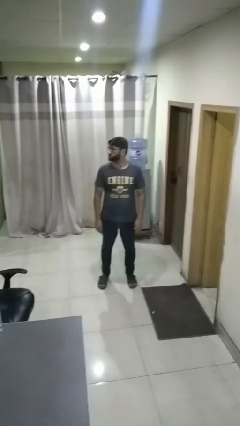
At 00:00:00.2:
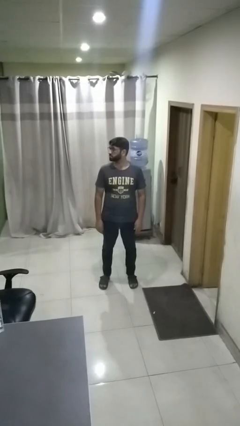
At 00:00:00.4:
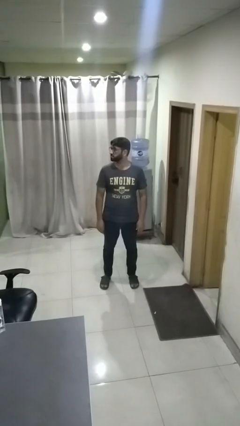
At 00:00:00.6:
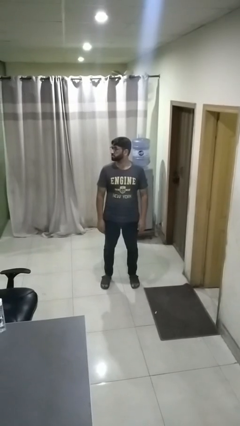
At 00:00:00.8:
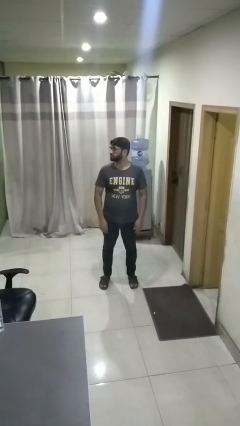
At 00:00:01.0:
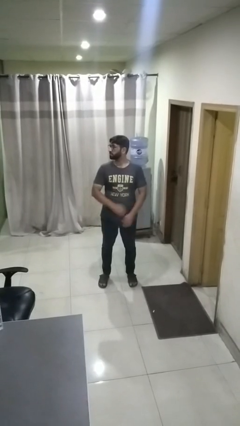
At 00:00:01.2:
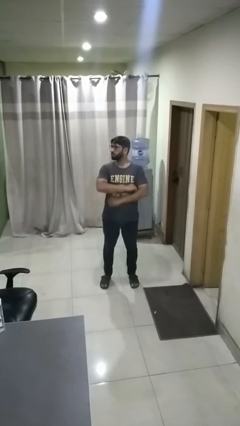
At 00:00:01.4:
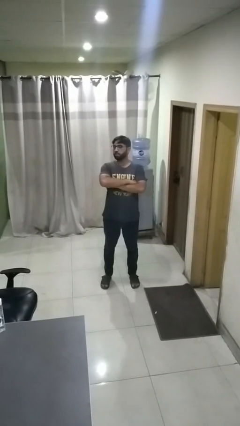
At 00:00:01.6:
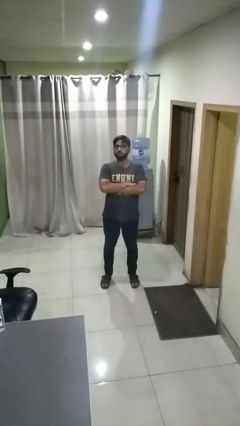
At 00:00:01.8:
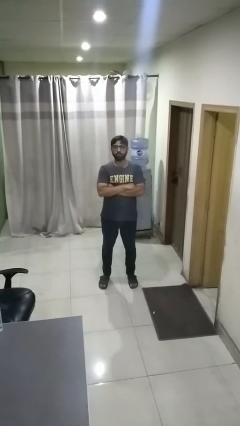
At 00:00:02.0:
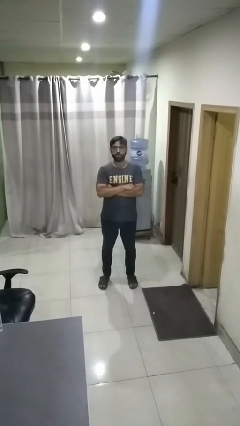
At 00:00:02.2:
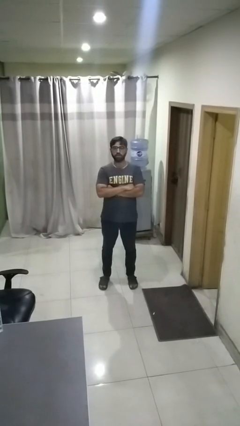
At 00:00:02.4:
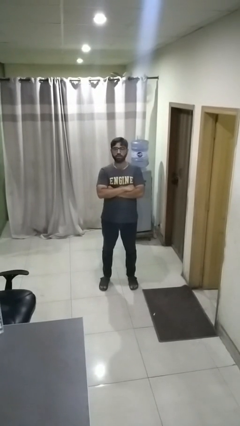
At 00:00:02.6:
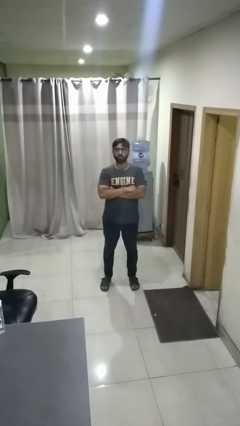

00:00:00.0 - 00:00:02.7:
person crosses arms

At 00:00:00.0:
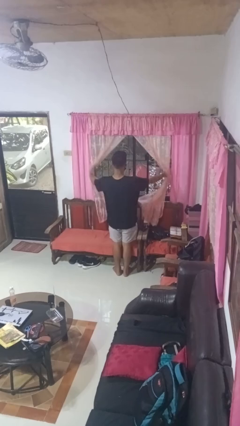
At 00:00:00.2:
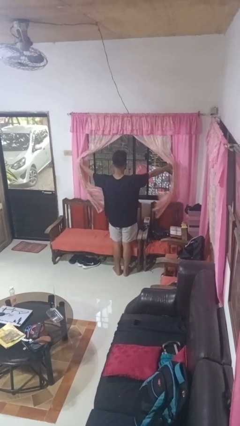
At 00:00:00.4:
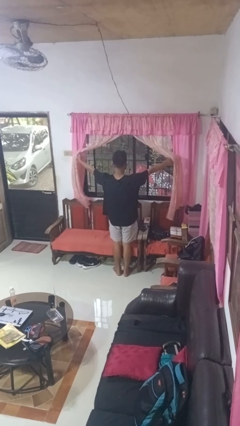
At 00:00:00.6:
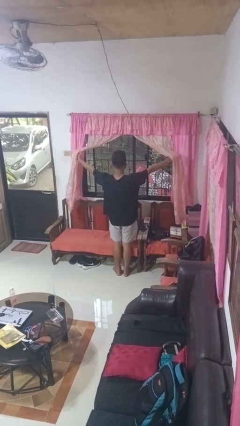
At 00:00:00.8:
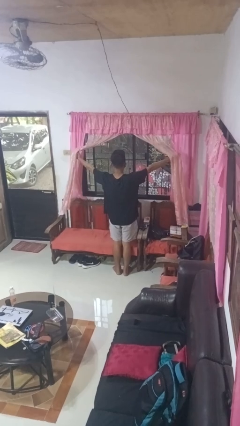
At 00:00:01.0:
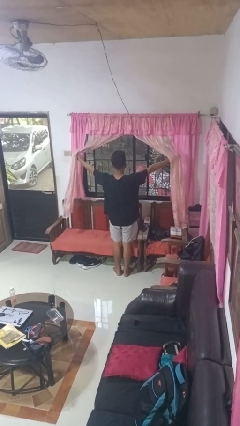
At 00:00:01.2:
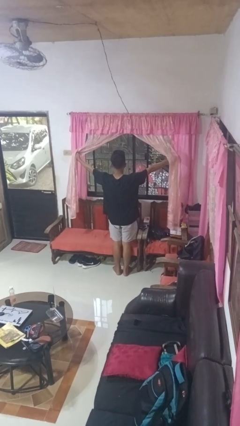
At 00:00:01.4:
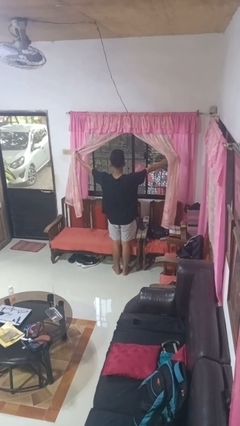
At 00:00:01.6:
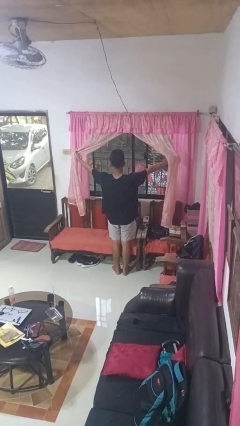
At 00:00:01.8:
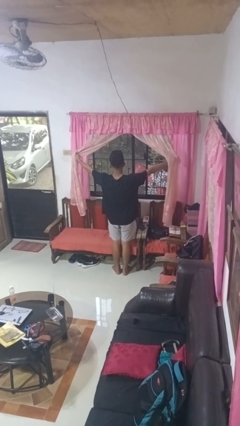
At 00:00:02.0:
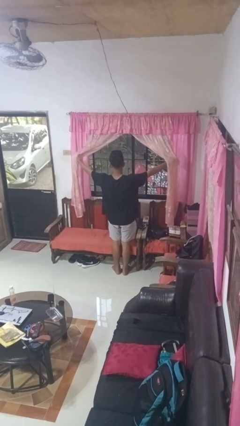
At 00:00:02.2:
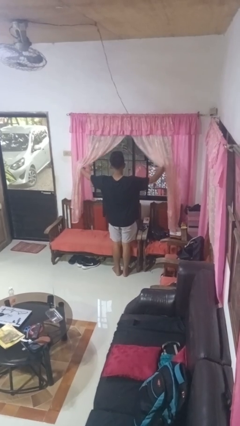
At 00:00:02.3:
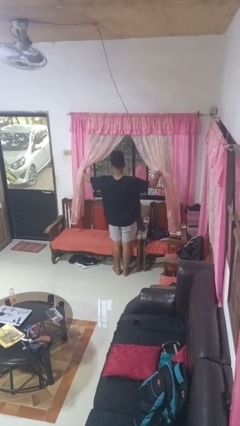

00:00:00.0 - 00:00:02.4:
person opens curtains

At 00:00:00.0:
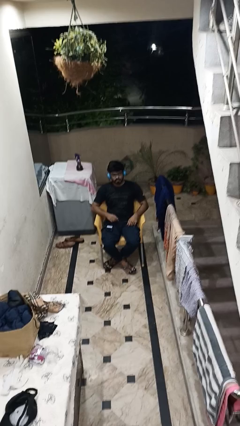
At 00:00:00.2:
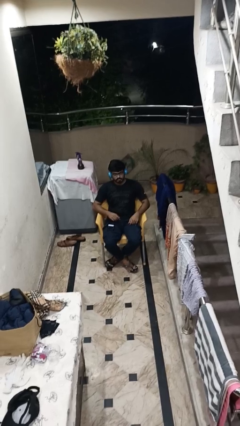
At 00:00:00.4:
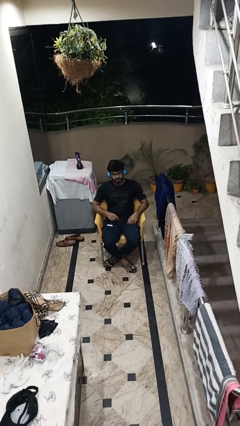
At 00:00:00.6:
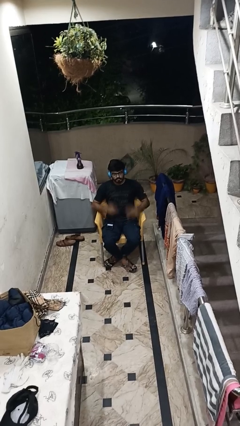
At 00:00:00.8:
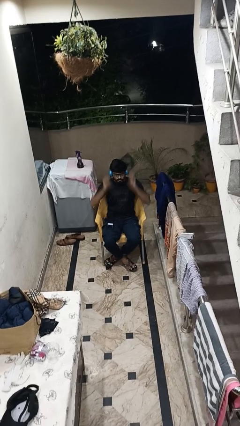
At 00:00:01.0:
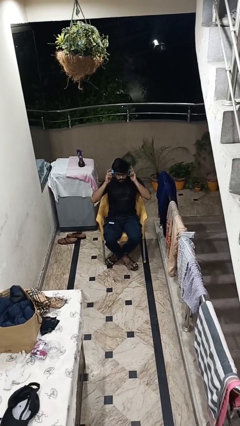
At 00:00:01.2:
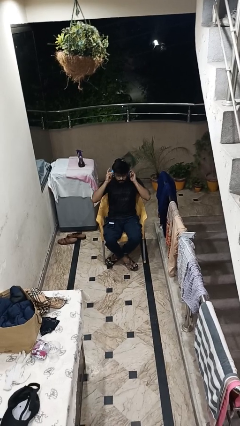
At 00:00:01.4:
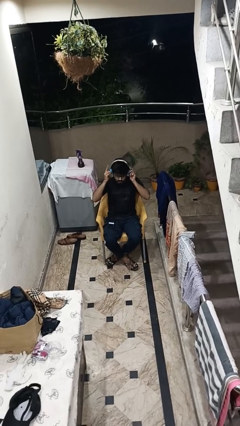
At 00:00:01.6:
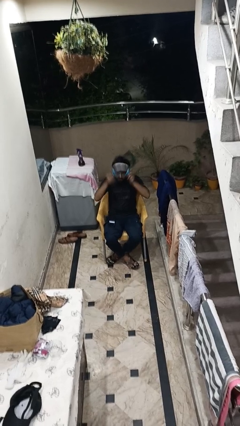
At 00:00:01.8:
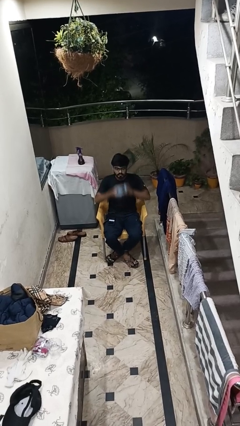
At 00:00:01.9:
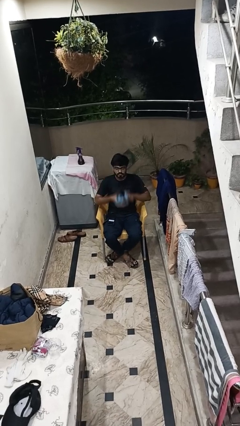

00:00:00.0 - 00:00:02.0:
person takes off headphones

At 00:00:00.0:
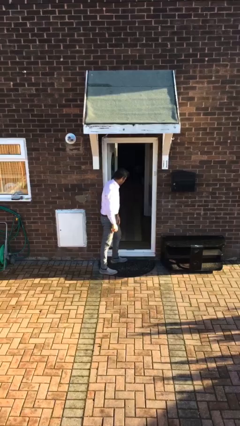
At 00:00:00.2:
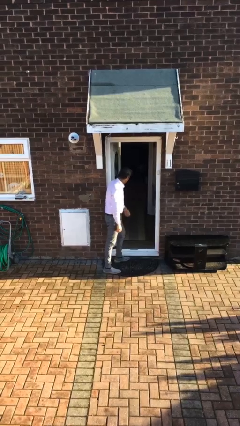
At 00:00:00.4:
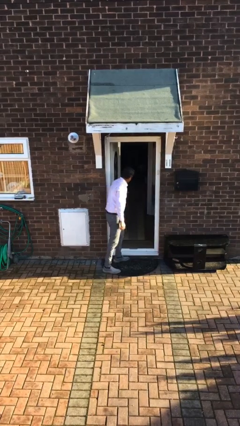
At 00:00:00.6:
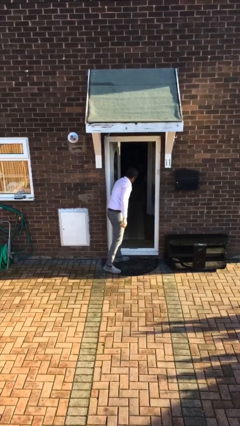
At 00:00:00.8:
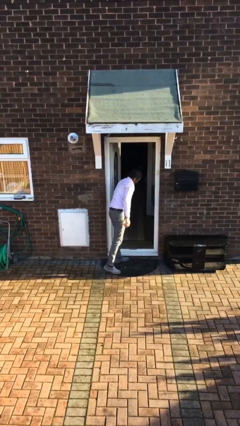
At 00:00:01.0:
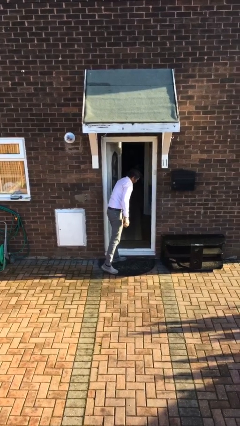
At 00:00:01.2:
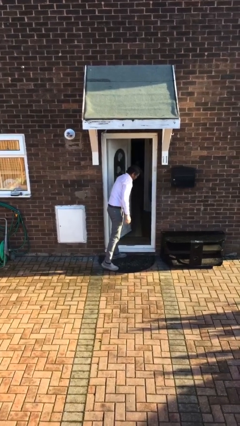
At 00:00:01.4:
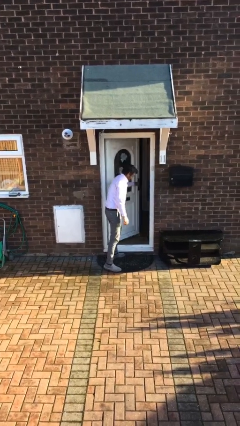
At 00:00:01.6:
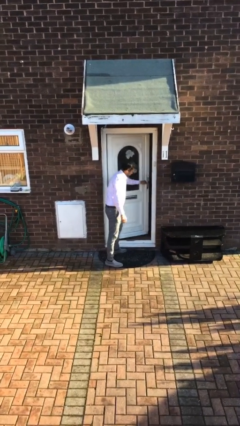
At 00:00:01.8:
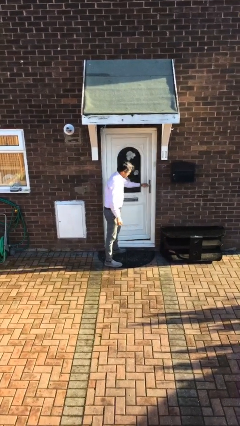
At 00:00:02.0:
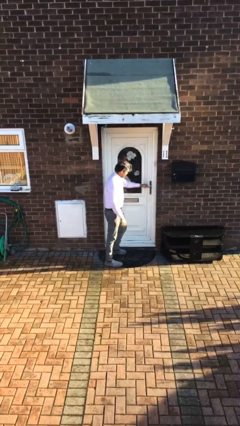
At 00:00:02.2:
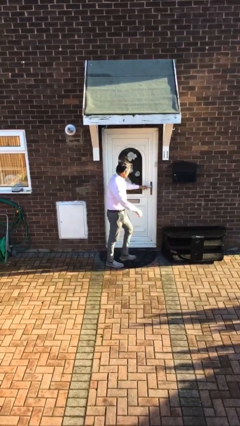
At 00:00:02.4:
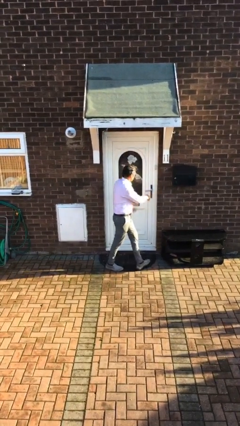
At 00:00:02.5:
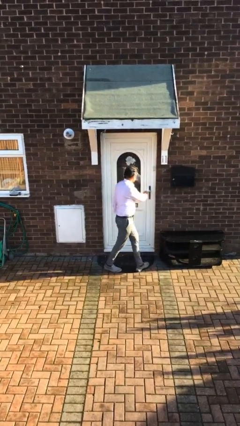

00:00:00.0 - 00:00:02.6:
person closes facility door

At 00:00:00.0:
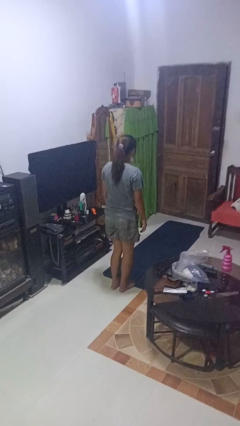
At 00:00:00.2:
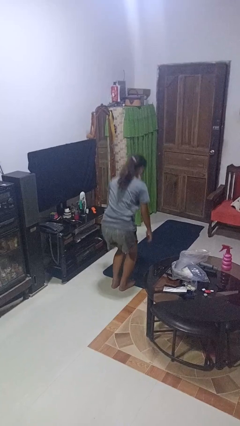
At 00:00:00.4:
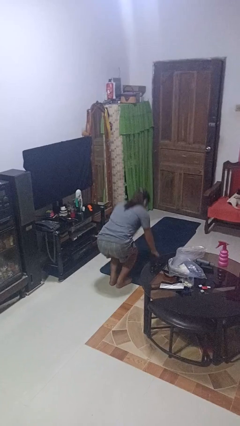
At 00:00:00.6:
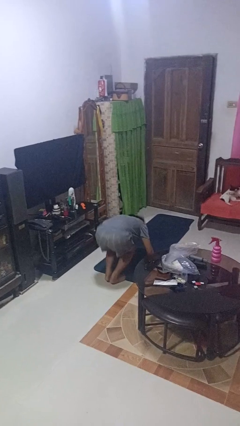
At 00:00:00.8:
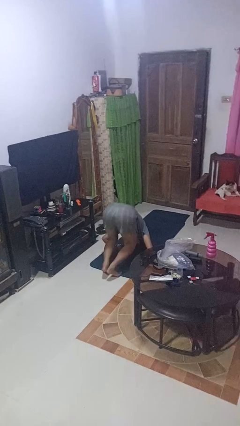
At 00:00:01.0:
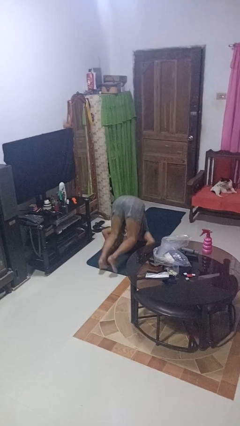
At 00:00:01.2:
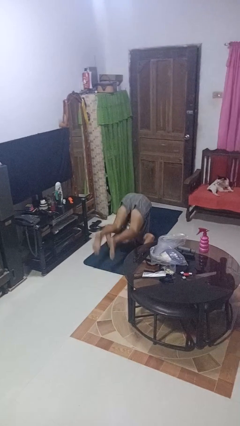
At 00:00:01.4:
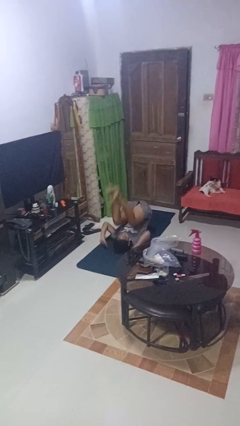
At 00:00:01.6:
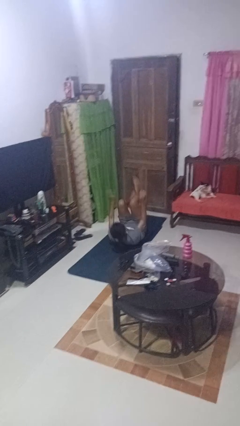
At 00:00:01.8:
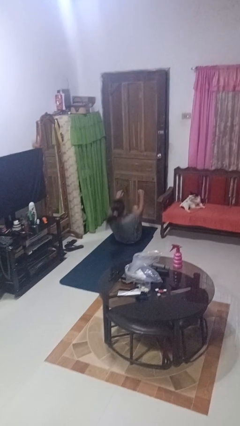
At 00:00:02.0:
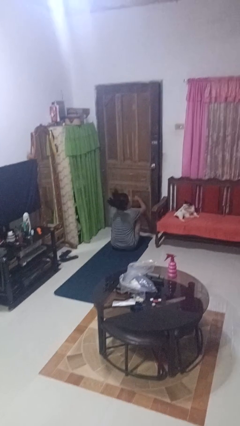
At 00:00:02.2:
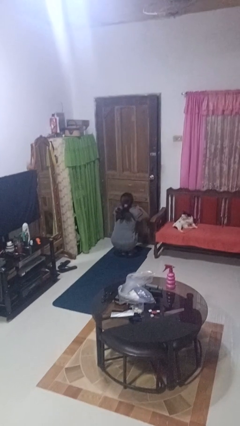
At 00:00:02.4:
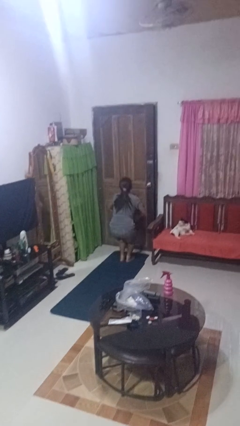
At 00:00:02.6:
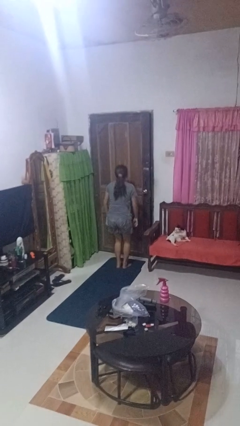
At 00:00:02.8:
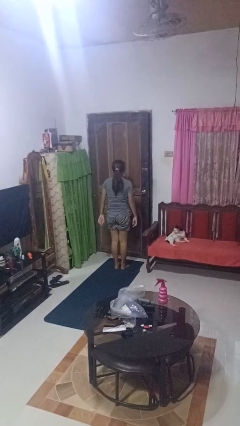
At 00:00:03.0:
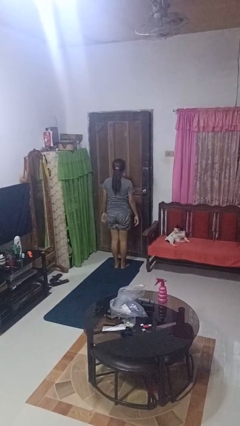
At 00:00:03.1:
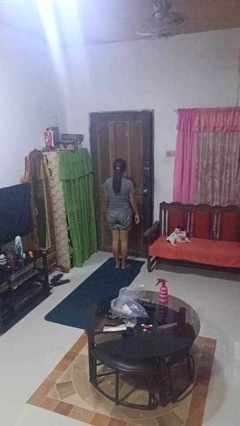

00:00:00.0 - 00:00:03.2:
person somersaults

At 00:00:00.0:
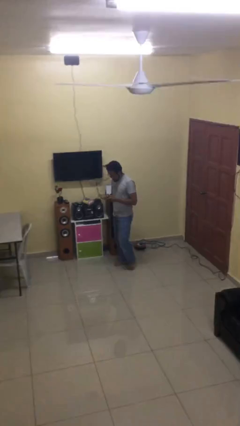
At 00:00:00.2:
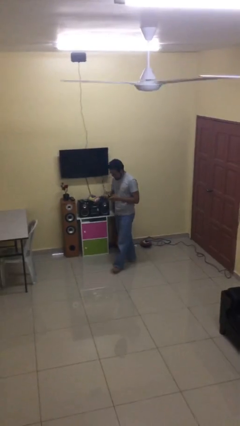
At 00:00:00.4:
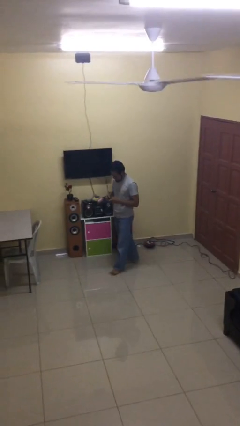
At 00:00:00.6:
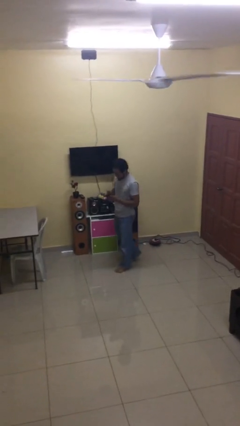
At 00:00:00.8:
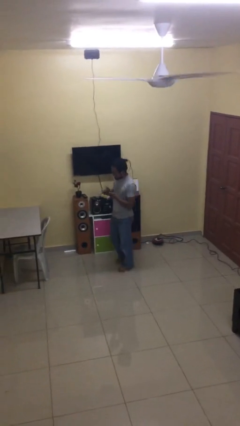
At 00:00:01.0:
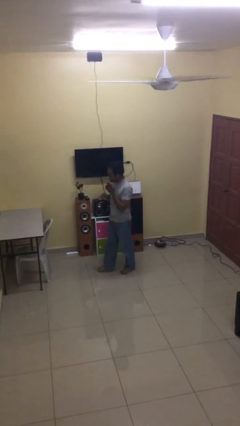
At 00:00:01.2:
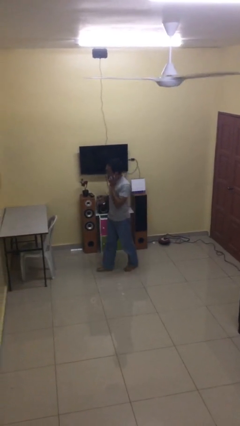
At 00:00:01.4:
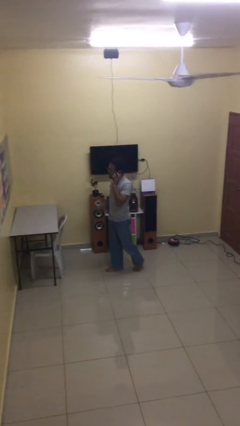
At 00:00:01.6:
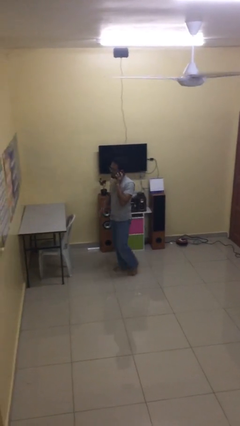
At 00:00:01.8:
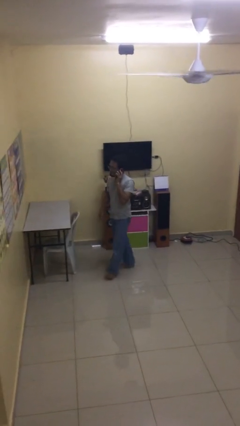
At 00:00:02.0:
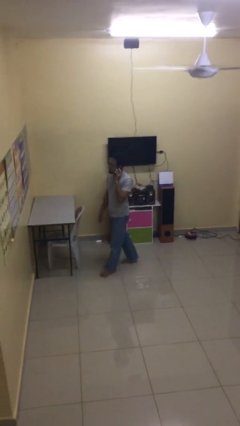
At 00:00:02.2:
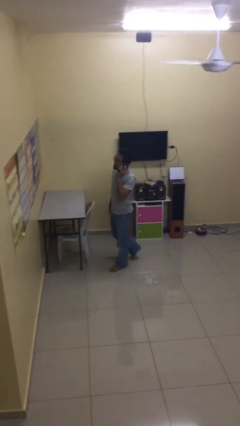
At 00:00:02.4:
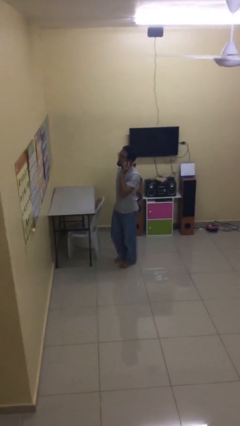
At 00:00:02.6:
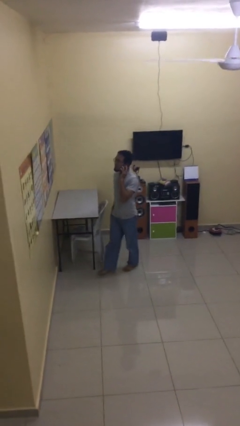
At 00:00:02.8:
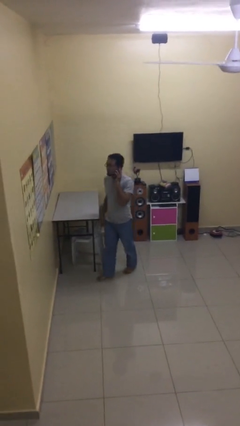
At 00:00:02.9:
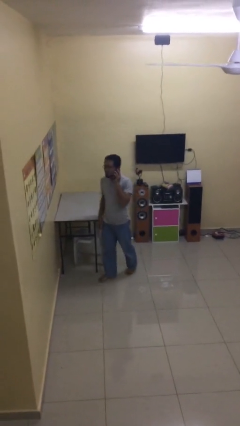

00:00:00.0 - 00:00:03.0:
person talks on phone

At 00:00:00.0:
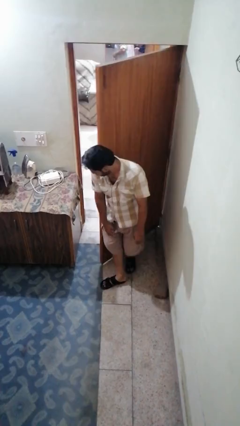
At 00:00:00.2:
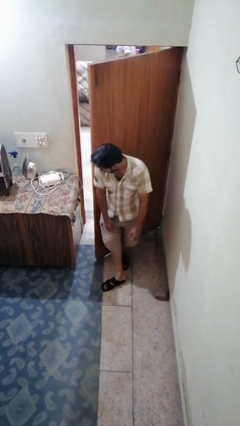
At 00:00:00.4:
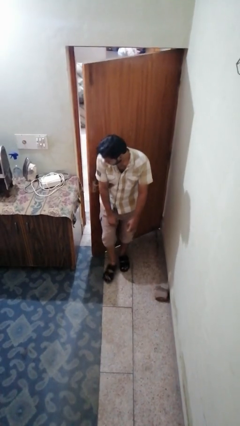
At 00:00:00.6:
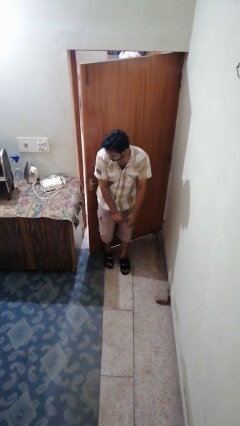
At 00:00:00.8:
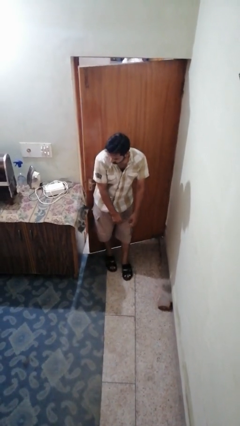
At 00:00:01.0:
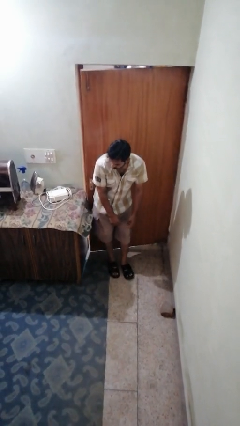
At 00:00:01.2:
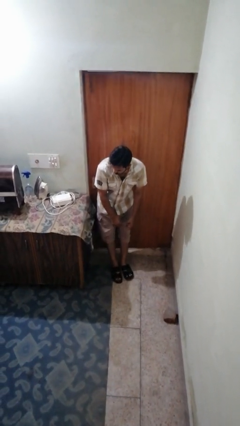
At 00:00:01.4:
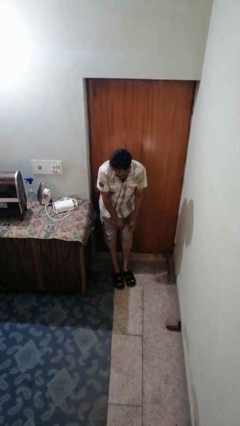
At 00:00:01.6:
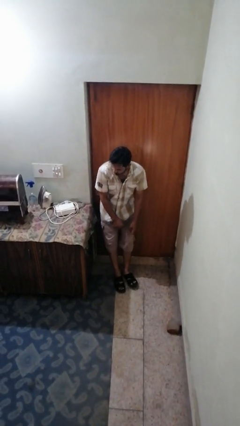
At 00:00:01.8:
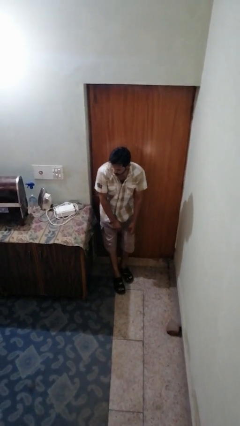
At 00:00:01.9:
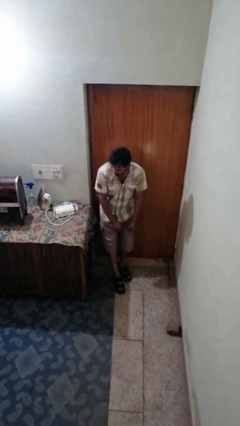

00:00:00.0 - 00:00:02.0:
person closes door with hip
